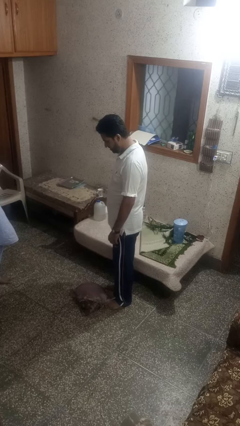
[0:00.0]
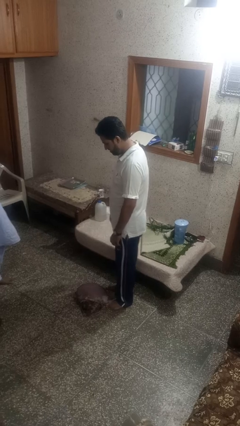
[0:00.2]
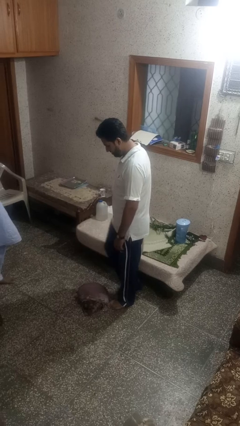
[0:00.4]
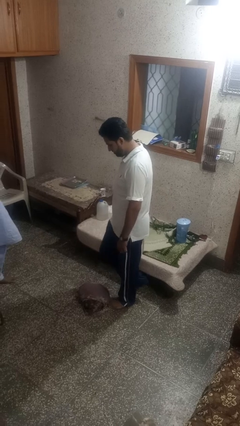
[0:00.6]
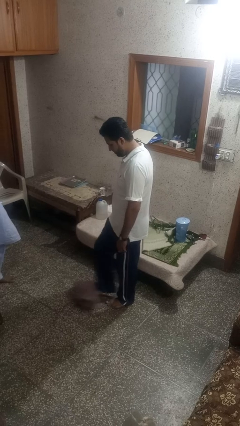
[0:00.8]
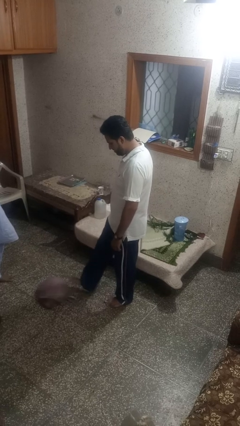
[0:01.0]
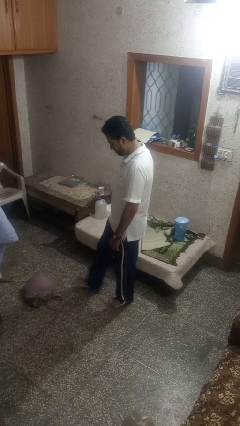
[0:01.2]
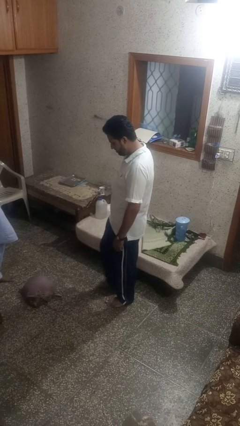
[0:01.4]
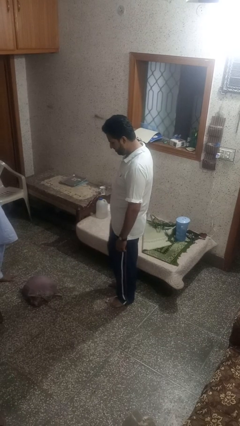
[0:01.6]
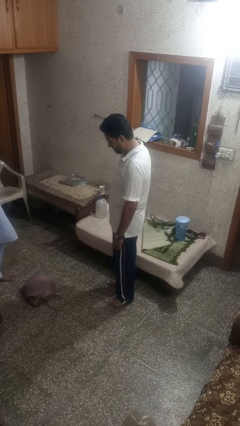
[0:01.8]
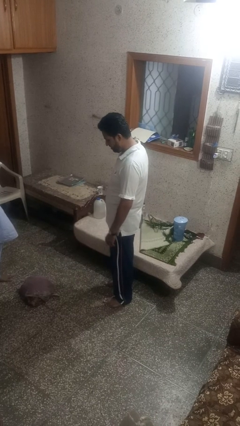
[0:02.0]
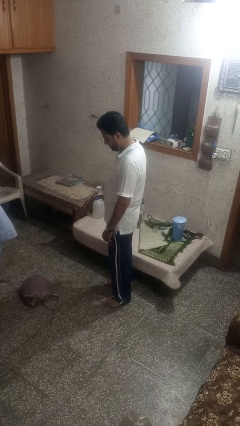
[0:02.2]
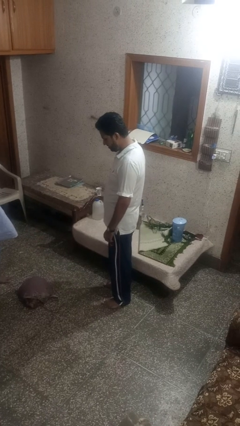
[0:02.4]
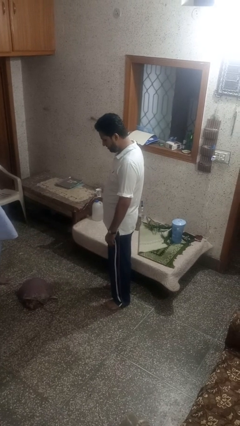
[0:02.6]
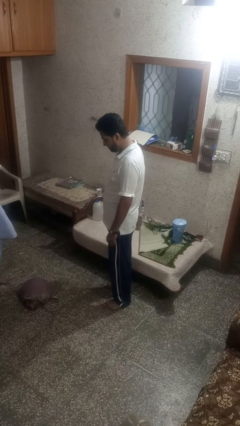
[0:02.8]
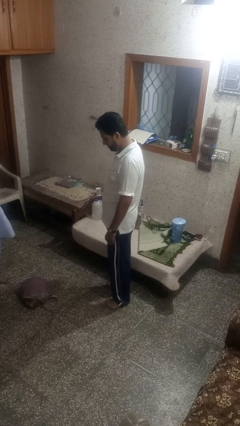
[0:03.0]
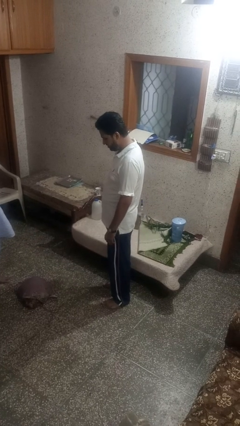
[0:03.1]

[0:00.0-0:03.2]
person kicks object to person

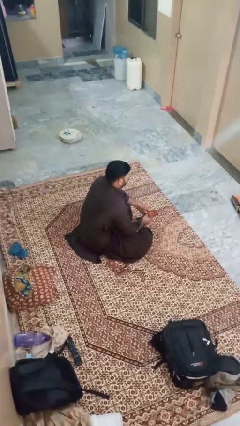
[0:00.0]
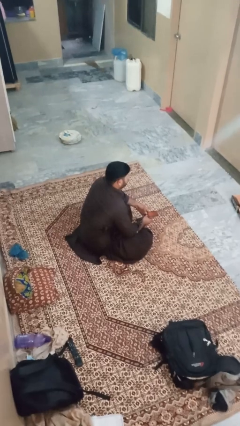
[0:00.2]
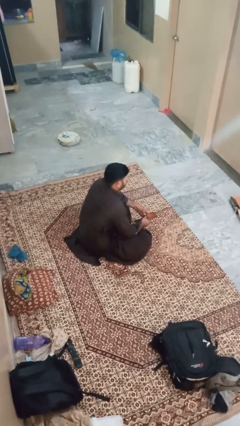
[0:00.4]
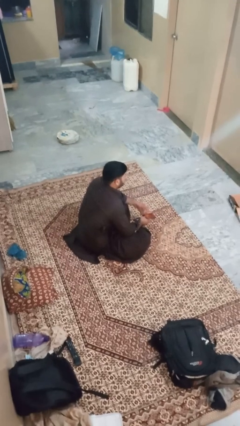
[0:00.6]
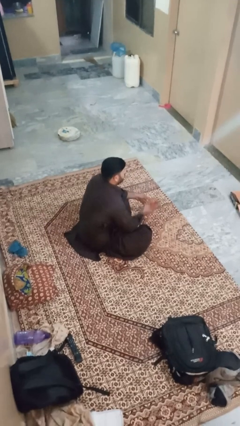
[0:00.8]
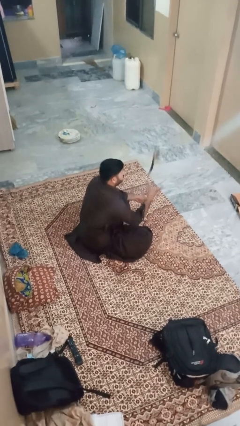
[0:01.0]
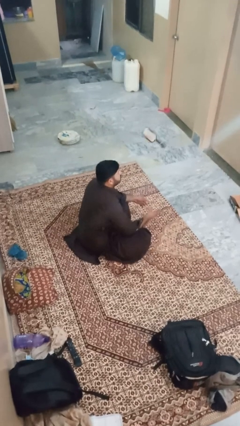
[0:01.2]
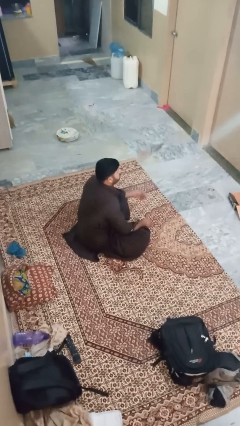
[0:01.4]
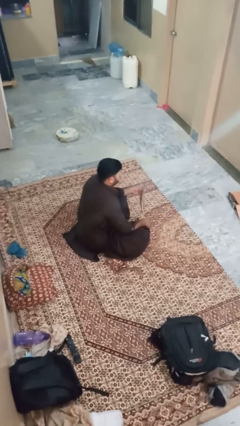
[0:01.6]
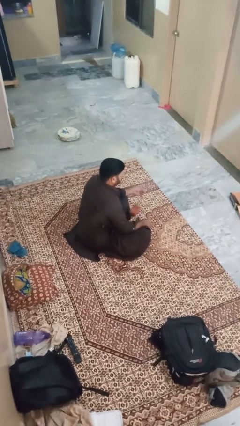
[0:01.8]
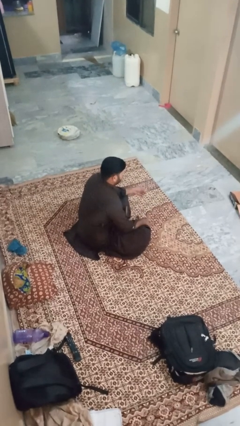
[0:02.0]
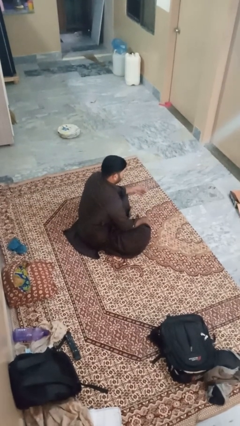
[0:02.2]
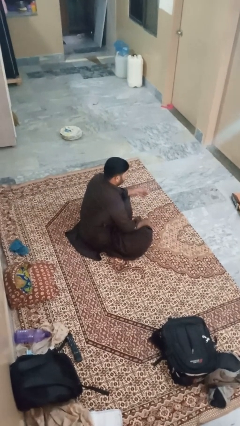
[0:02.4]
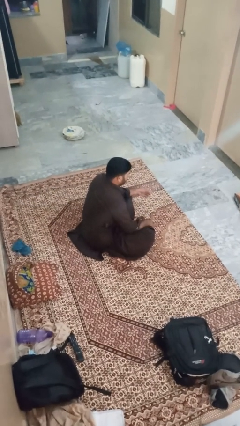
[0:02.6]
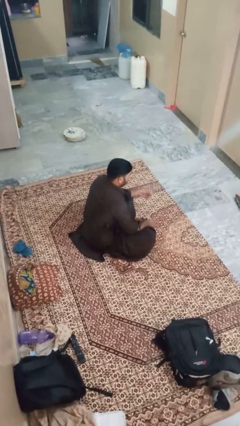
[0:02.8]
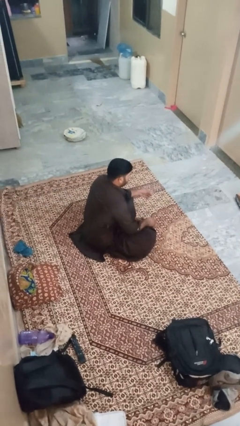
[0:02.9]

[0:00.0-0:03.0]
person throws object into air

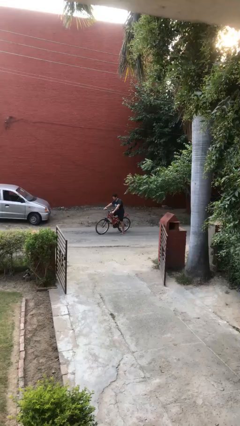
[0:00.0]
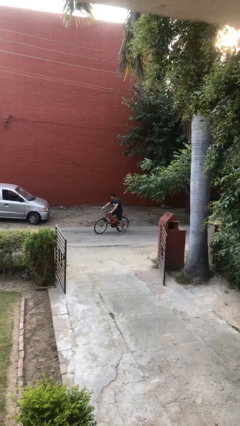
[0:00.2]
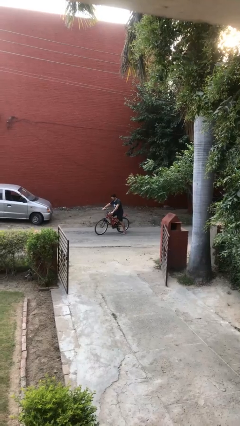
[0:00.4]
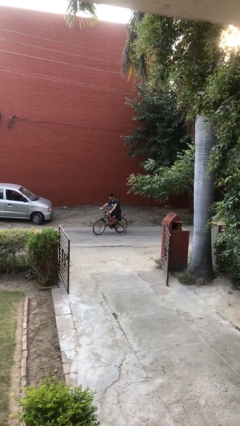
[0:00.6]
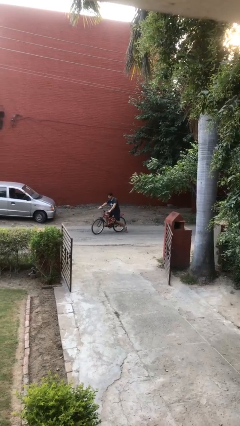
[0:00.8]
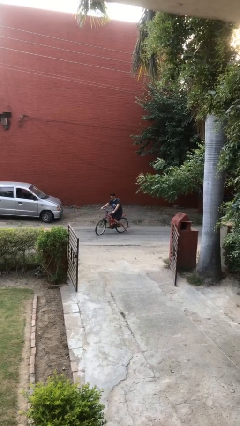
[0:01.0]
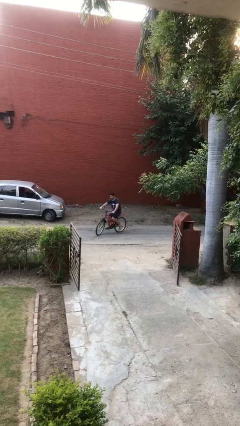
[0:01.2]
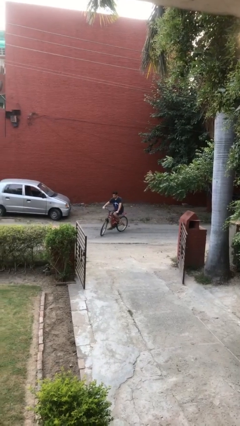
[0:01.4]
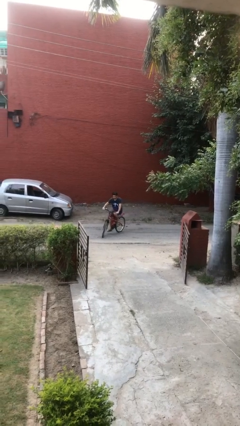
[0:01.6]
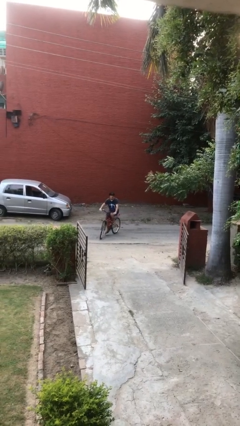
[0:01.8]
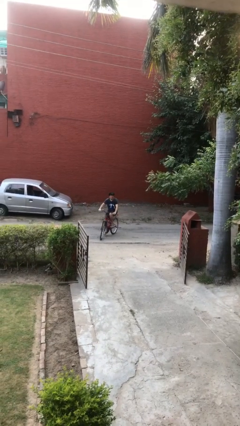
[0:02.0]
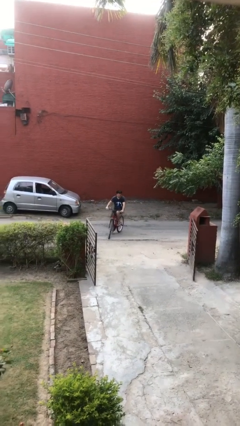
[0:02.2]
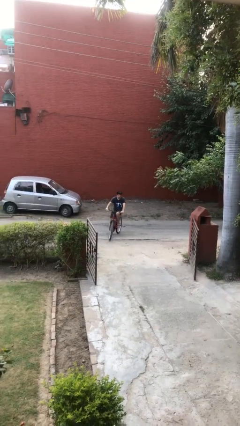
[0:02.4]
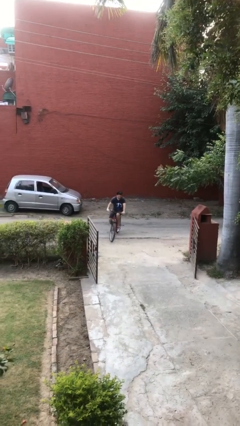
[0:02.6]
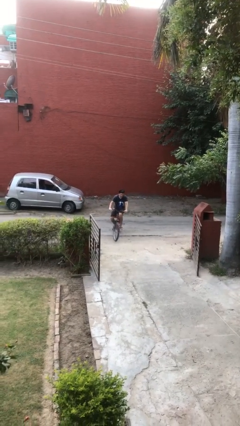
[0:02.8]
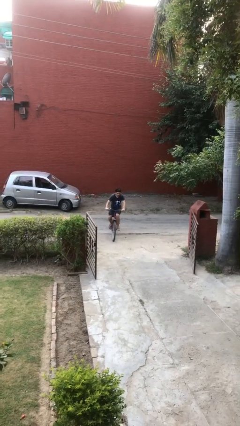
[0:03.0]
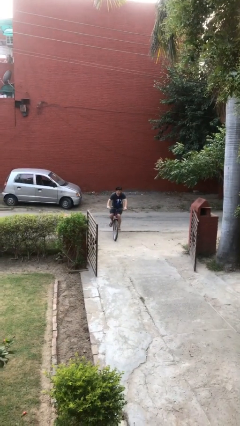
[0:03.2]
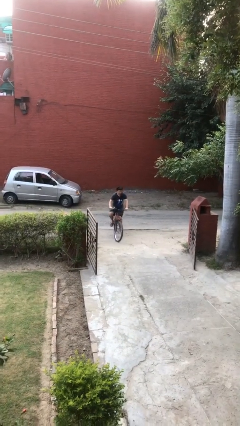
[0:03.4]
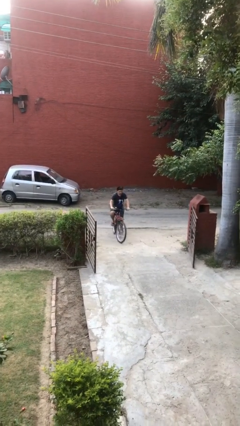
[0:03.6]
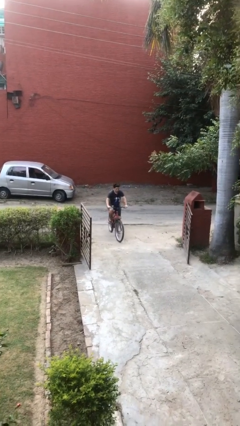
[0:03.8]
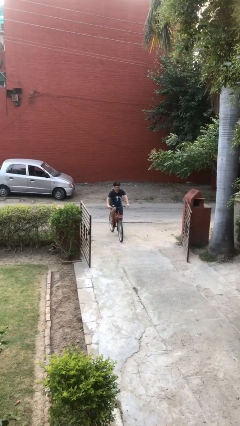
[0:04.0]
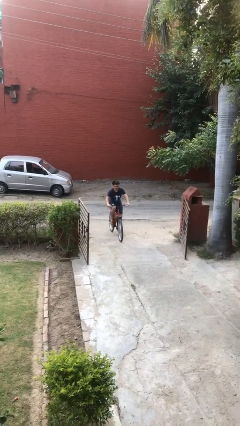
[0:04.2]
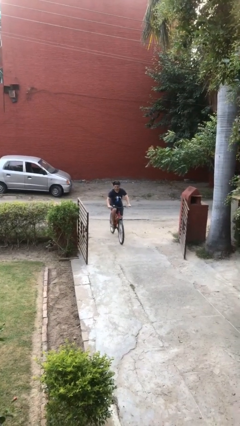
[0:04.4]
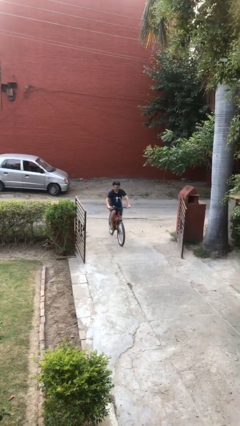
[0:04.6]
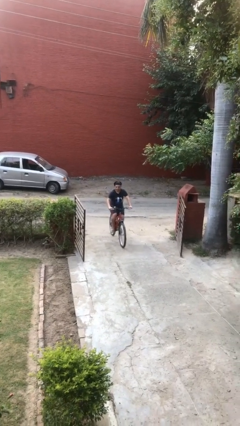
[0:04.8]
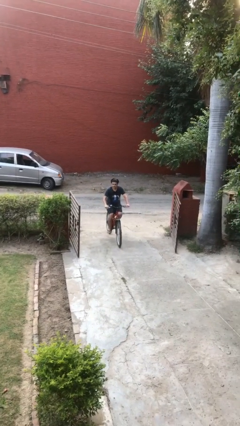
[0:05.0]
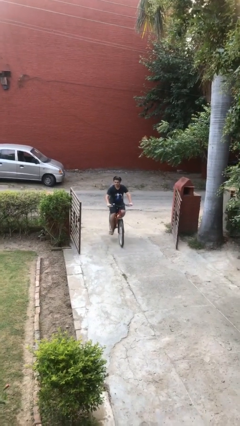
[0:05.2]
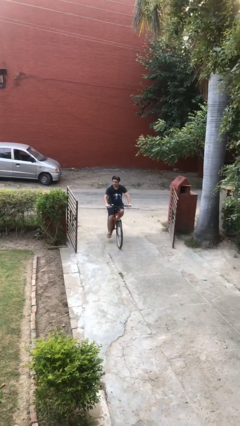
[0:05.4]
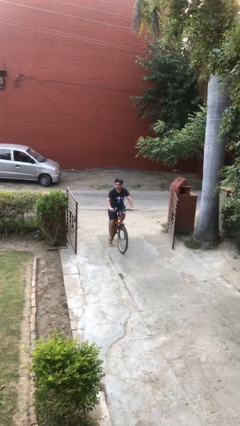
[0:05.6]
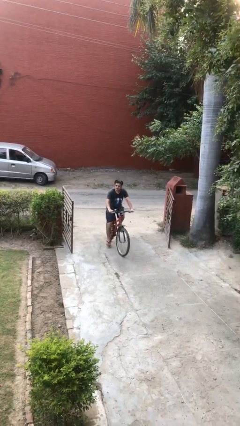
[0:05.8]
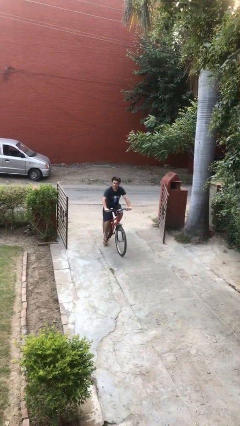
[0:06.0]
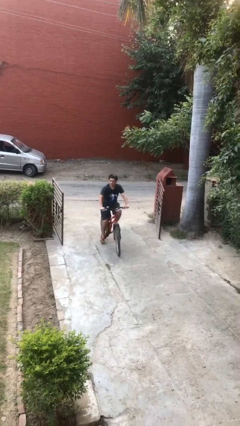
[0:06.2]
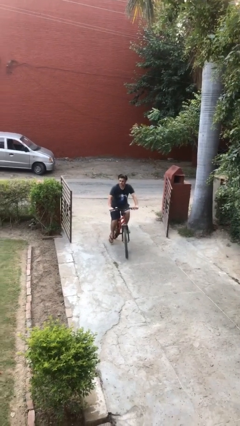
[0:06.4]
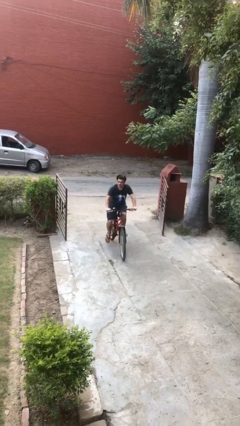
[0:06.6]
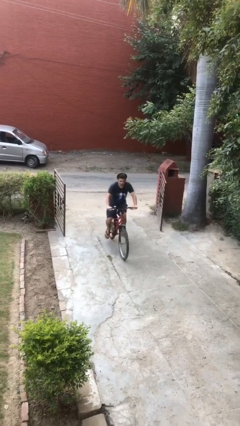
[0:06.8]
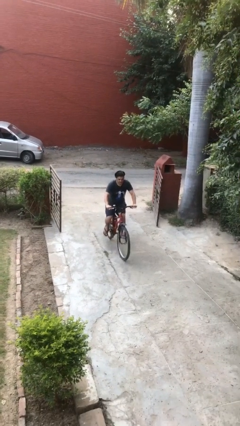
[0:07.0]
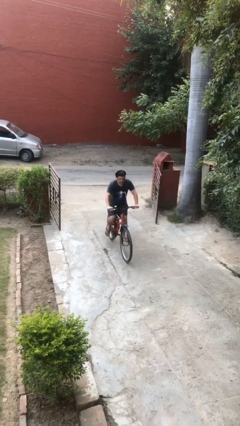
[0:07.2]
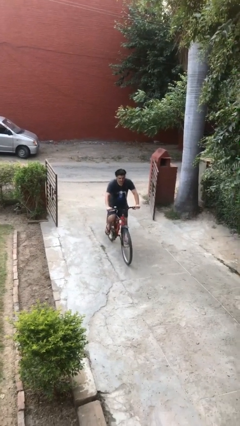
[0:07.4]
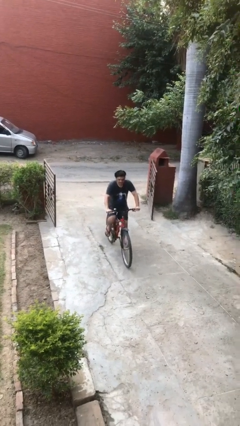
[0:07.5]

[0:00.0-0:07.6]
person rides bicycle

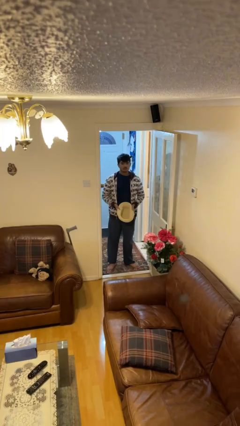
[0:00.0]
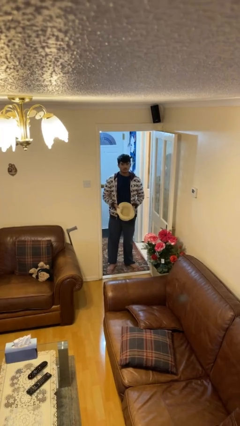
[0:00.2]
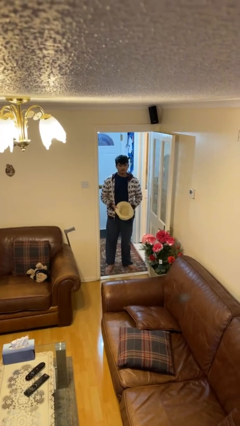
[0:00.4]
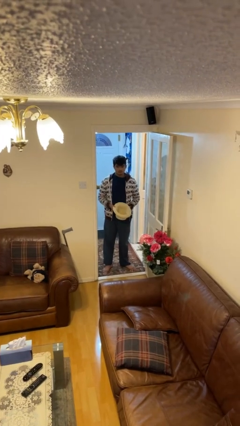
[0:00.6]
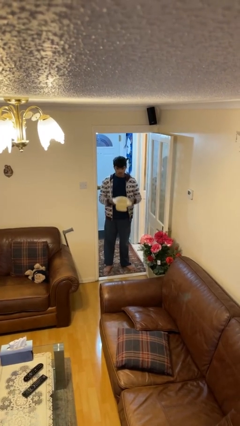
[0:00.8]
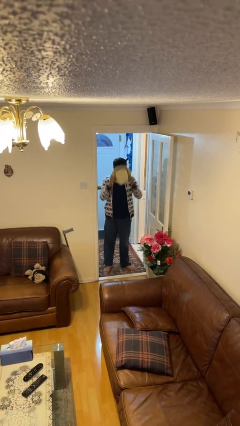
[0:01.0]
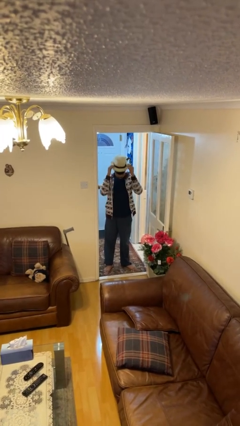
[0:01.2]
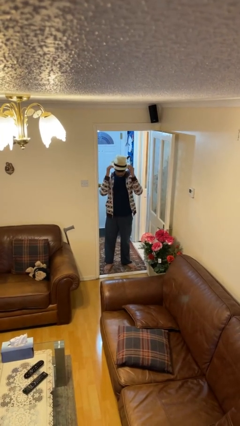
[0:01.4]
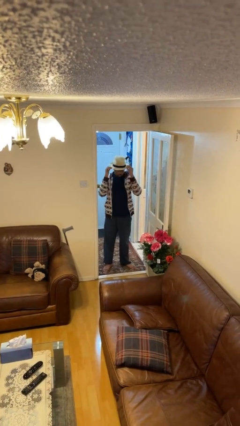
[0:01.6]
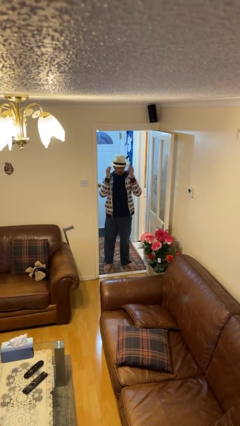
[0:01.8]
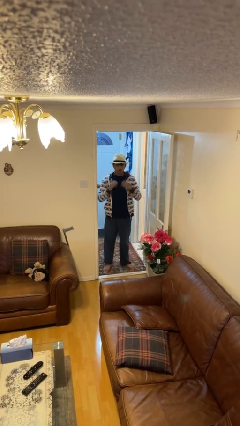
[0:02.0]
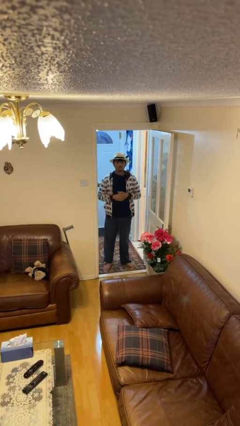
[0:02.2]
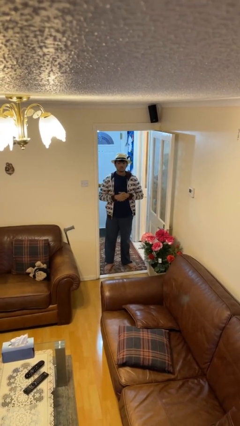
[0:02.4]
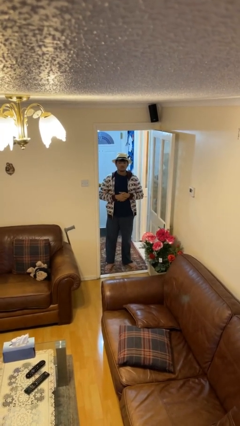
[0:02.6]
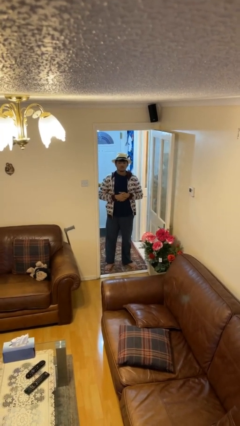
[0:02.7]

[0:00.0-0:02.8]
person puts on hat

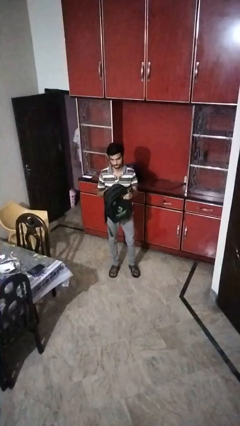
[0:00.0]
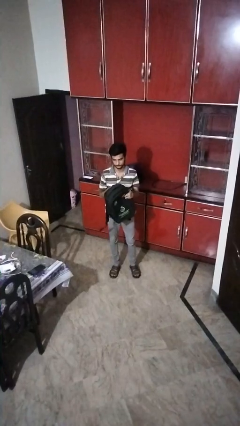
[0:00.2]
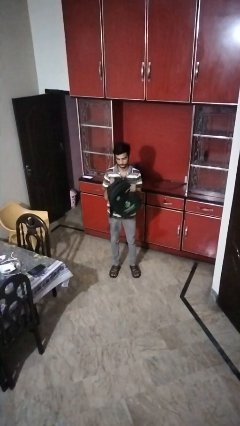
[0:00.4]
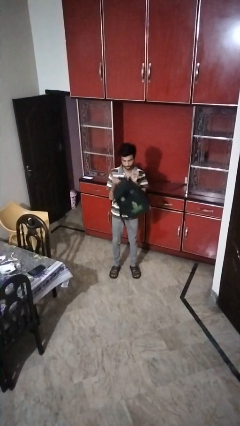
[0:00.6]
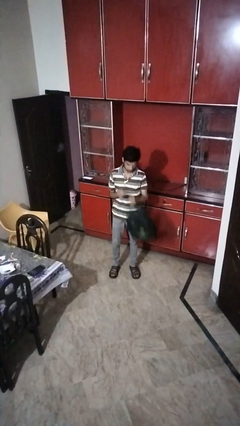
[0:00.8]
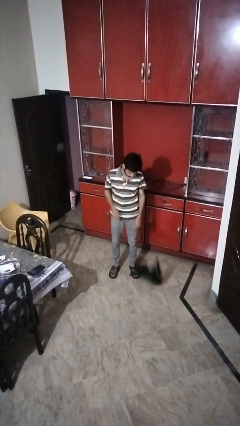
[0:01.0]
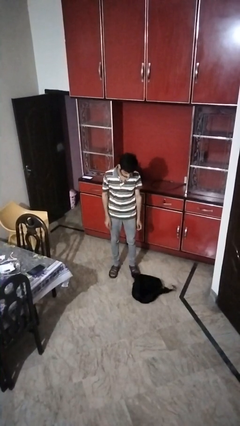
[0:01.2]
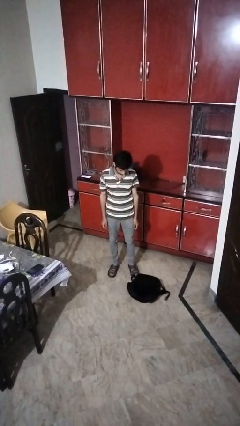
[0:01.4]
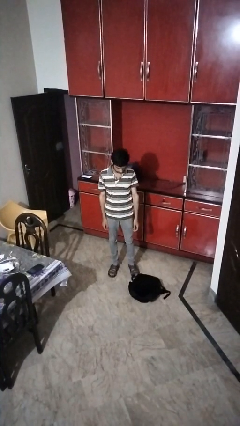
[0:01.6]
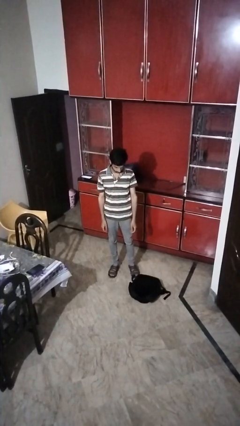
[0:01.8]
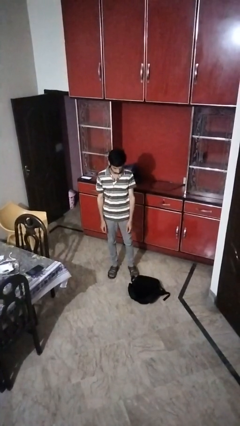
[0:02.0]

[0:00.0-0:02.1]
person drops object
